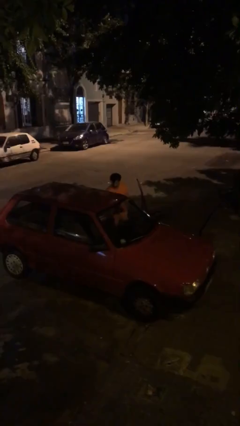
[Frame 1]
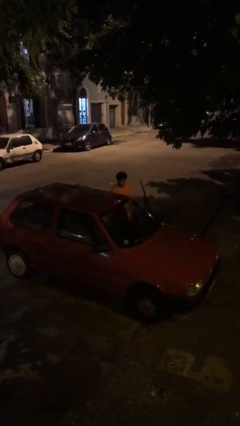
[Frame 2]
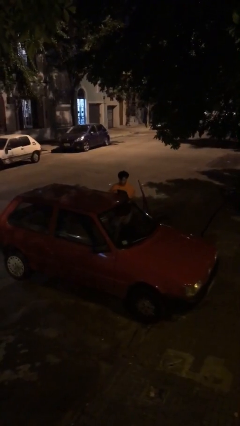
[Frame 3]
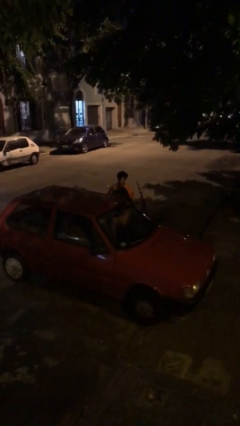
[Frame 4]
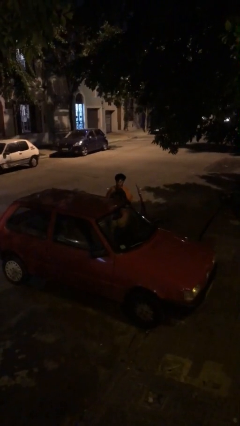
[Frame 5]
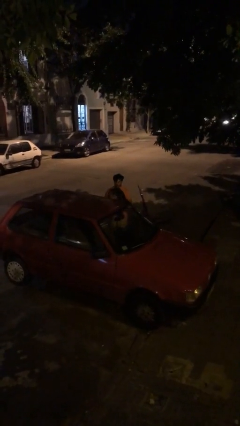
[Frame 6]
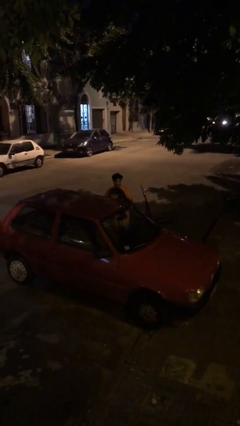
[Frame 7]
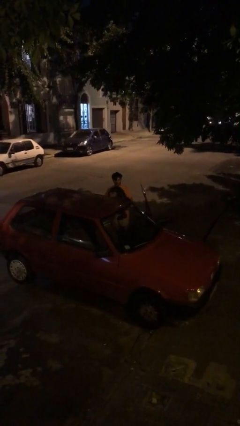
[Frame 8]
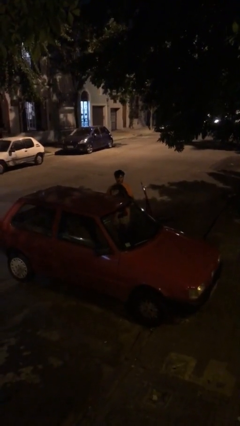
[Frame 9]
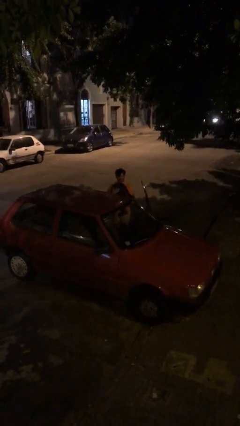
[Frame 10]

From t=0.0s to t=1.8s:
person unloads car

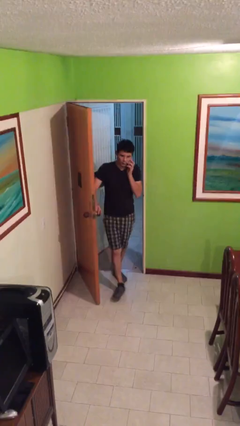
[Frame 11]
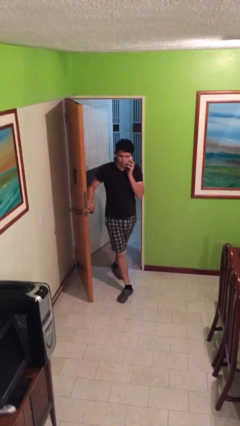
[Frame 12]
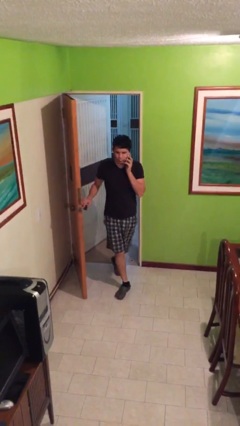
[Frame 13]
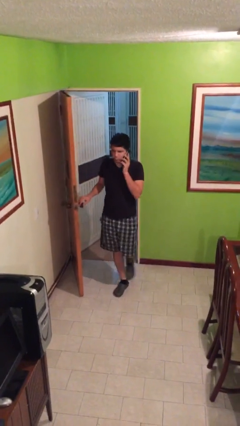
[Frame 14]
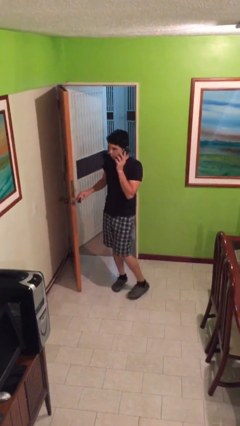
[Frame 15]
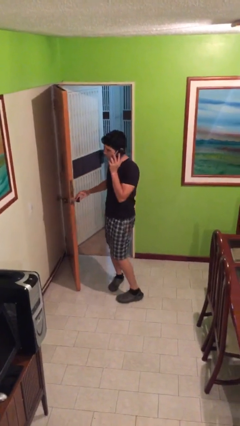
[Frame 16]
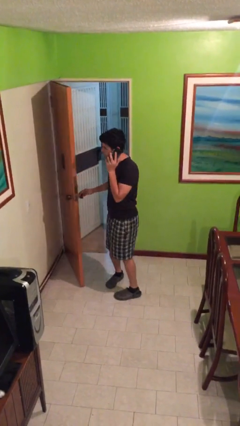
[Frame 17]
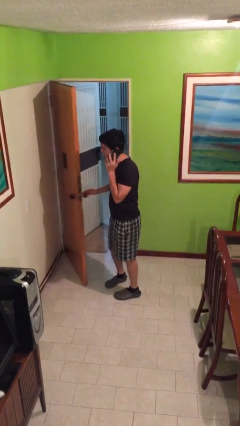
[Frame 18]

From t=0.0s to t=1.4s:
person enters scene through structure

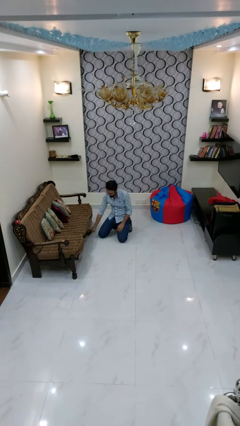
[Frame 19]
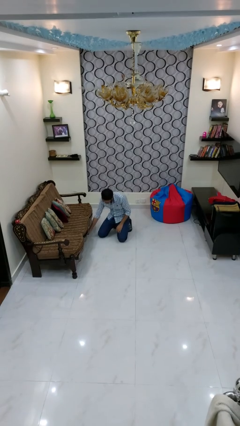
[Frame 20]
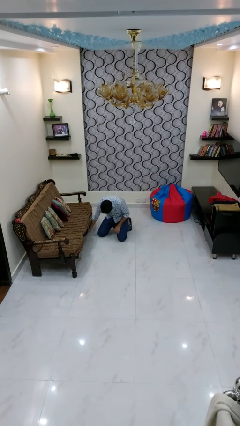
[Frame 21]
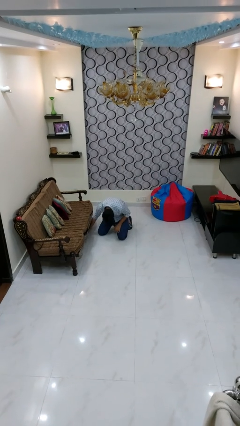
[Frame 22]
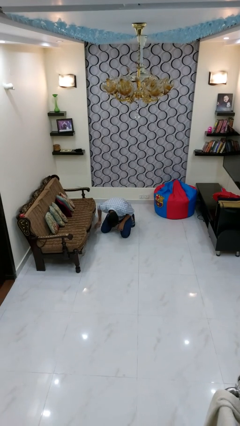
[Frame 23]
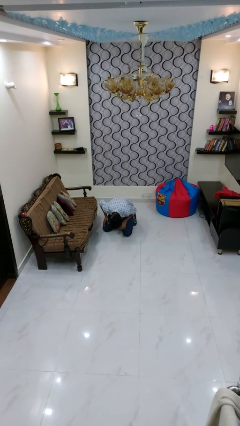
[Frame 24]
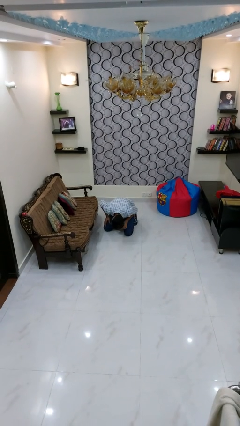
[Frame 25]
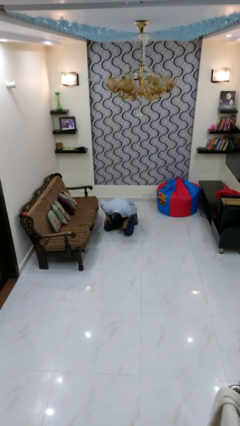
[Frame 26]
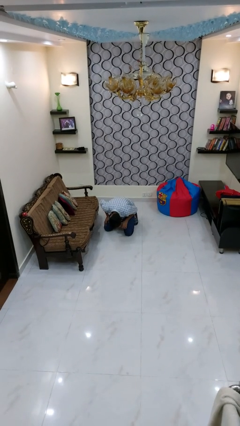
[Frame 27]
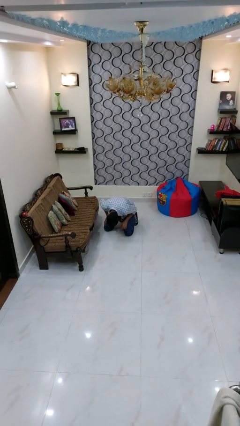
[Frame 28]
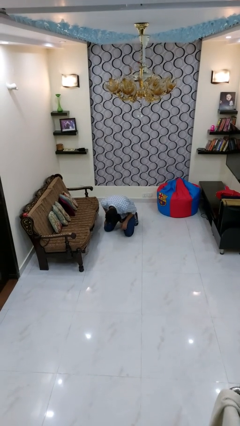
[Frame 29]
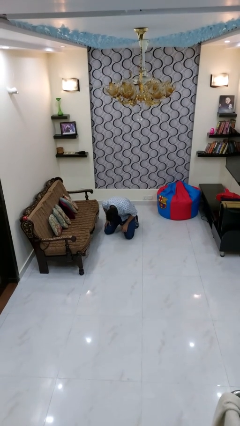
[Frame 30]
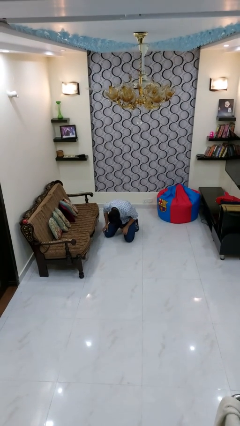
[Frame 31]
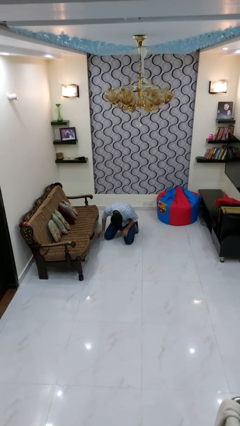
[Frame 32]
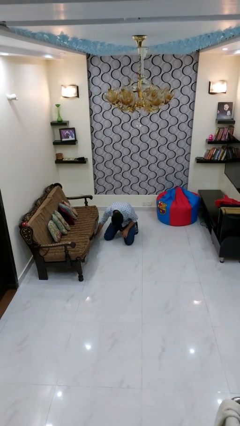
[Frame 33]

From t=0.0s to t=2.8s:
person searches under couch

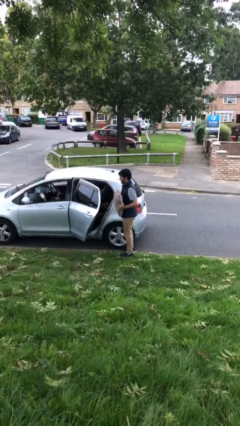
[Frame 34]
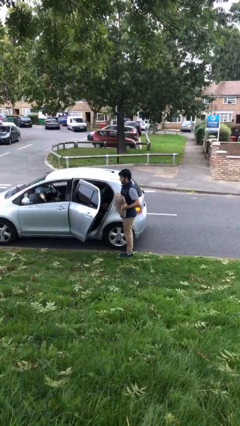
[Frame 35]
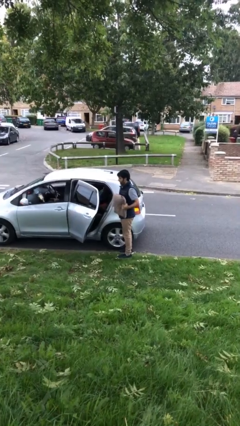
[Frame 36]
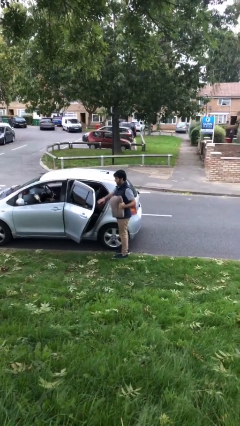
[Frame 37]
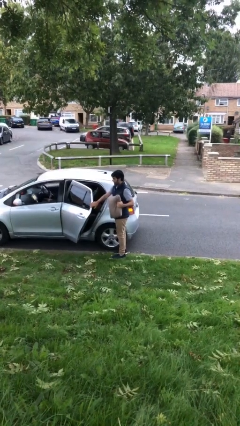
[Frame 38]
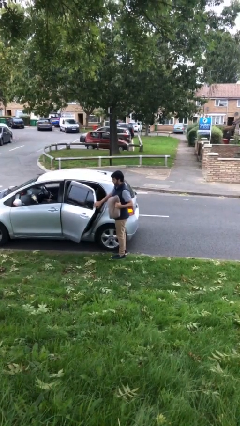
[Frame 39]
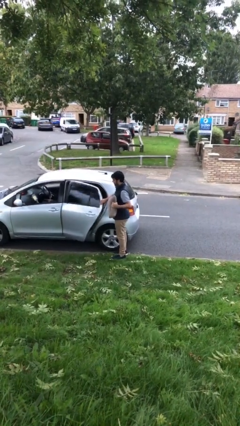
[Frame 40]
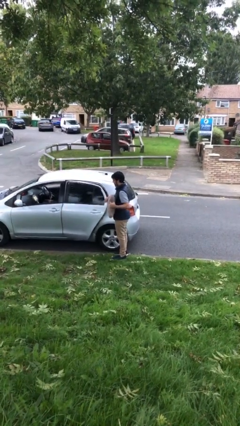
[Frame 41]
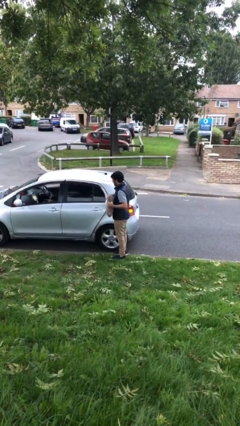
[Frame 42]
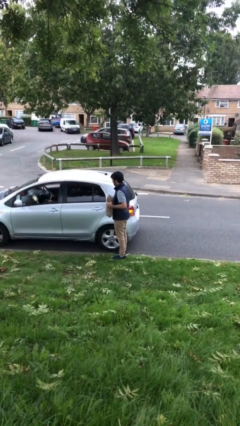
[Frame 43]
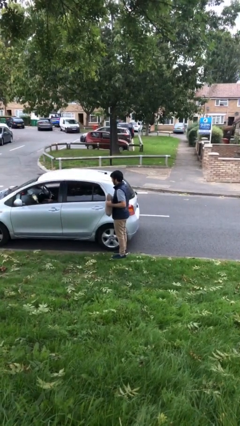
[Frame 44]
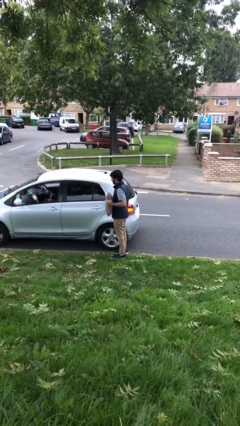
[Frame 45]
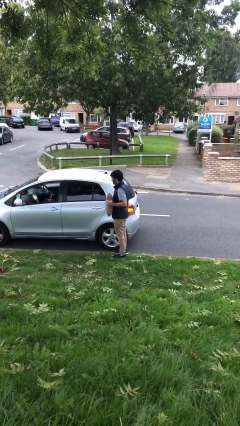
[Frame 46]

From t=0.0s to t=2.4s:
person closes car door

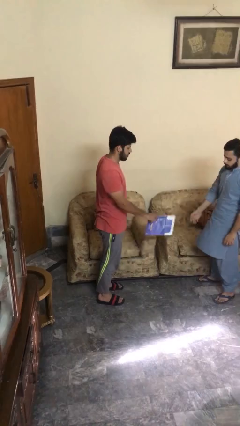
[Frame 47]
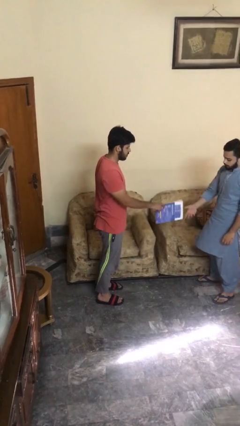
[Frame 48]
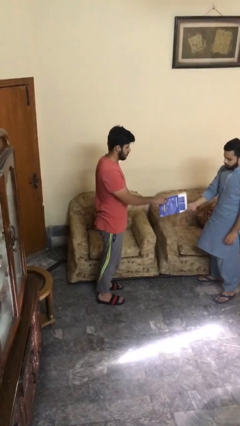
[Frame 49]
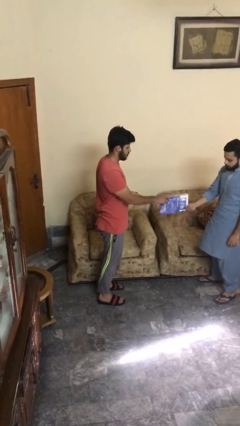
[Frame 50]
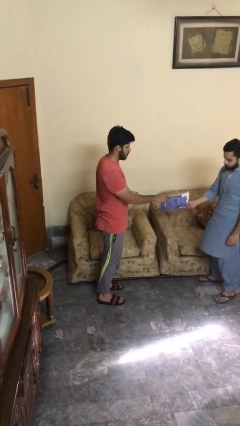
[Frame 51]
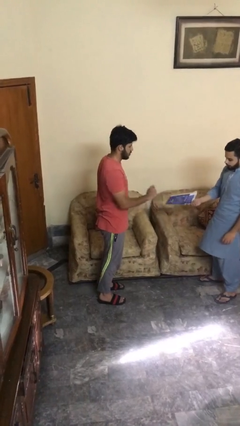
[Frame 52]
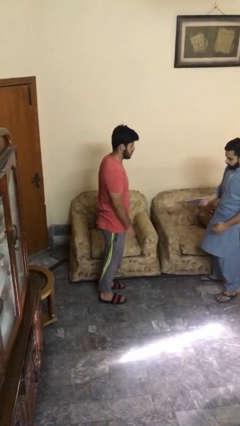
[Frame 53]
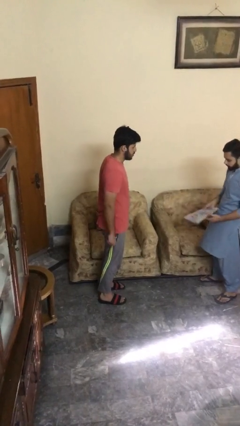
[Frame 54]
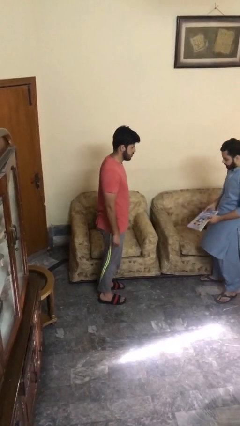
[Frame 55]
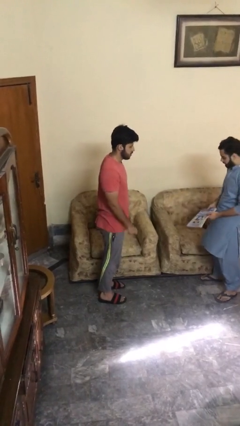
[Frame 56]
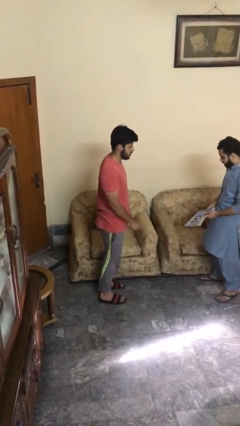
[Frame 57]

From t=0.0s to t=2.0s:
person transfers object to person

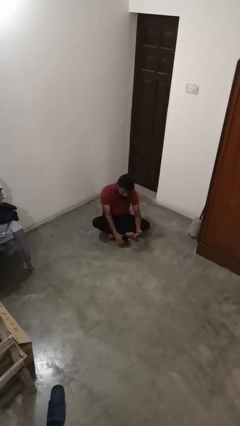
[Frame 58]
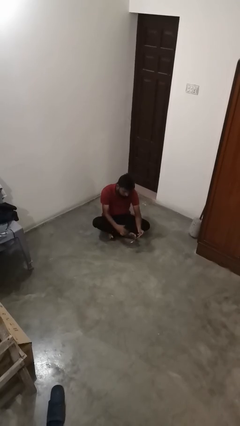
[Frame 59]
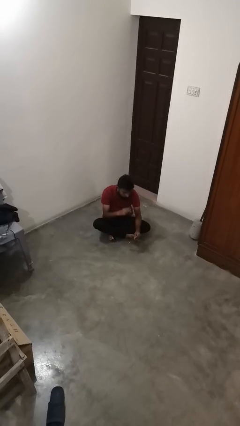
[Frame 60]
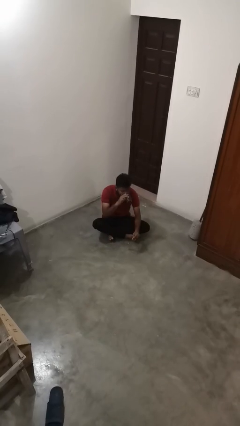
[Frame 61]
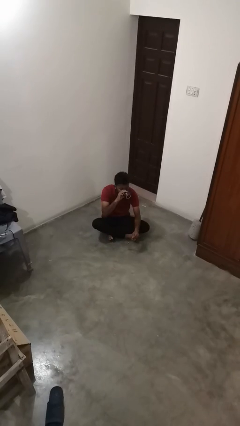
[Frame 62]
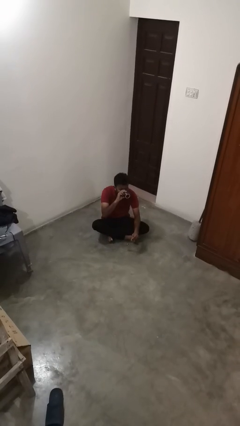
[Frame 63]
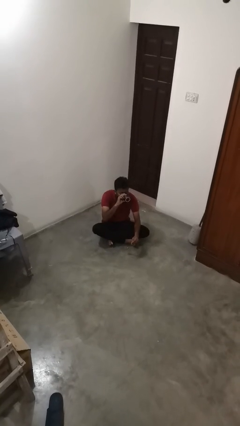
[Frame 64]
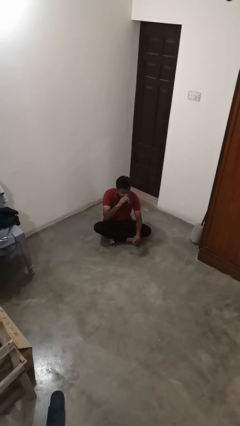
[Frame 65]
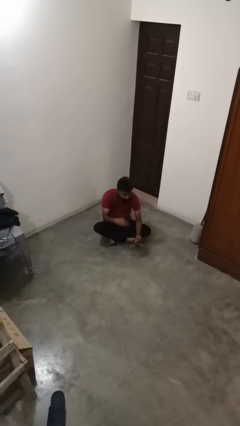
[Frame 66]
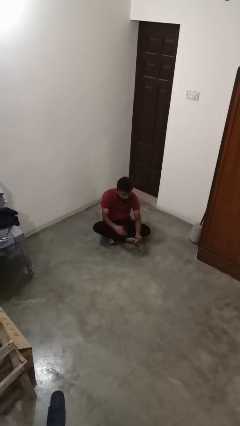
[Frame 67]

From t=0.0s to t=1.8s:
person drinks from mug

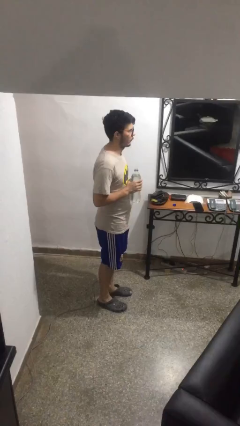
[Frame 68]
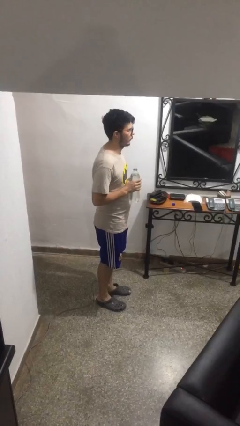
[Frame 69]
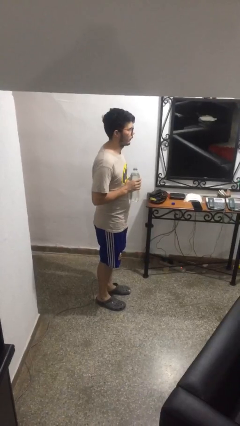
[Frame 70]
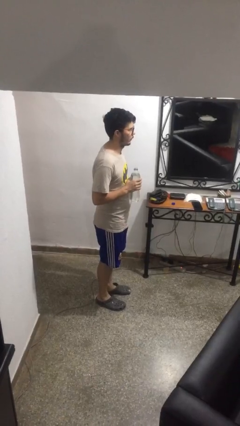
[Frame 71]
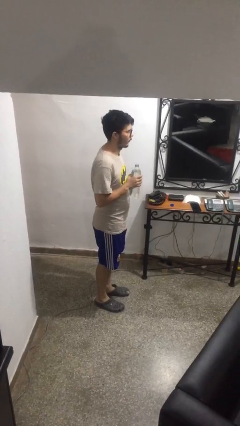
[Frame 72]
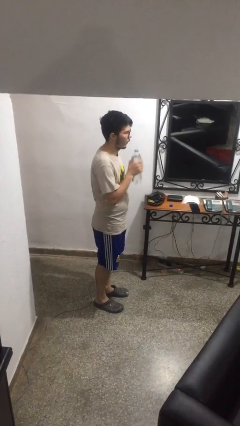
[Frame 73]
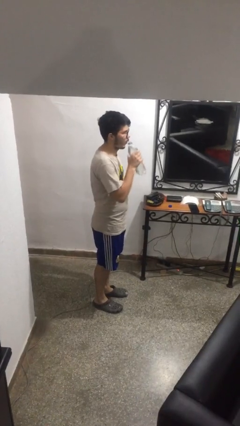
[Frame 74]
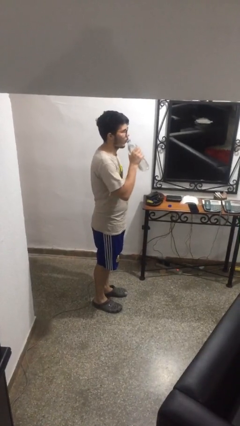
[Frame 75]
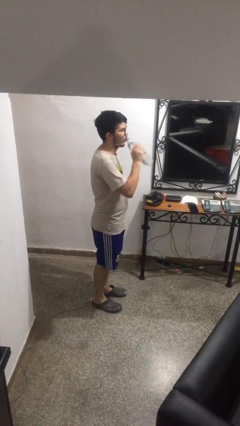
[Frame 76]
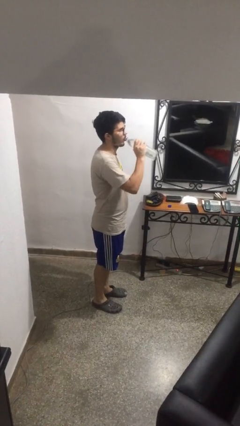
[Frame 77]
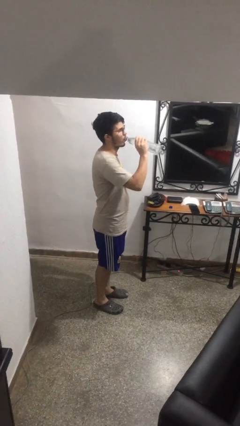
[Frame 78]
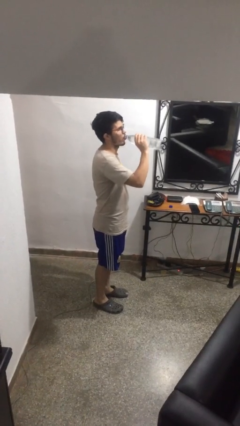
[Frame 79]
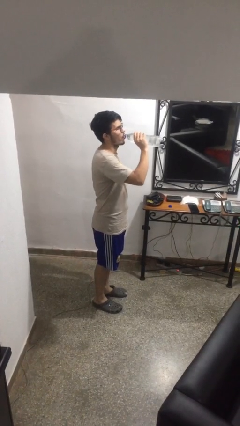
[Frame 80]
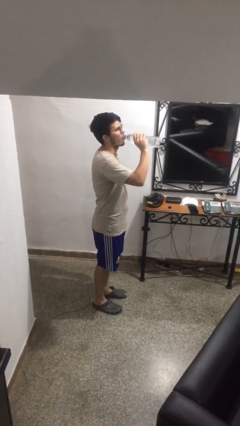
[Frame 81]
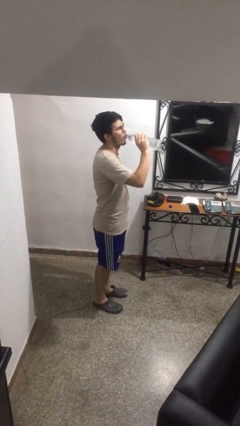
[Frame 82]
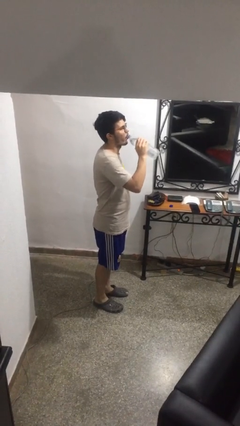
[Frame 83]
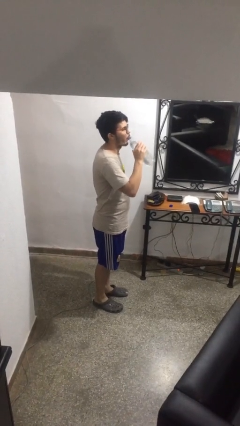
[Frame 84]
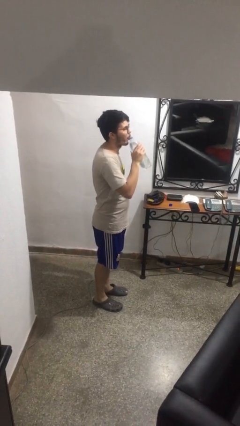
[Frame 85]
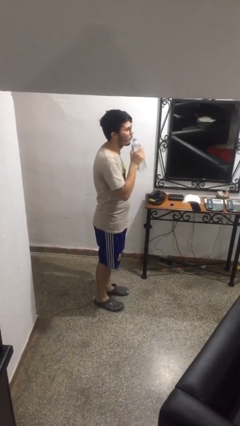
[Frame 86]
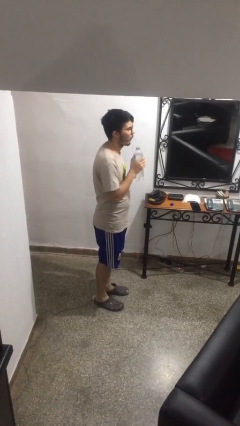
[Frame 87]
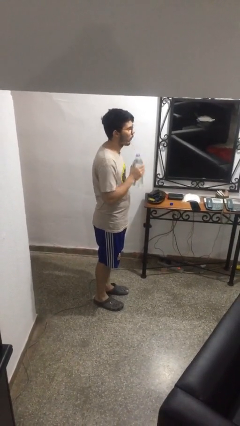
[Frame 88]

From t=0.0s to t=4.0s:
person drinks from bottle

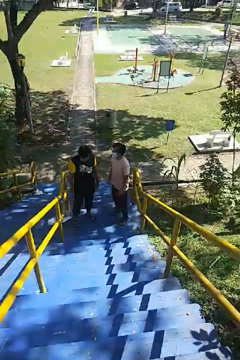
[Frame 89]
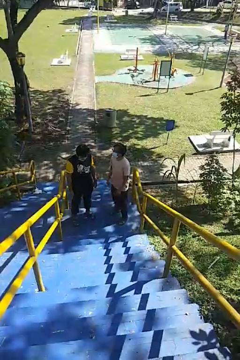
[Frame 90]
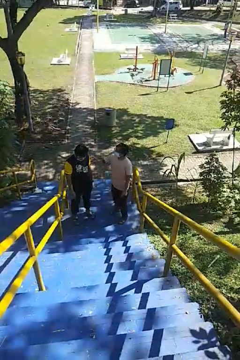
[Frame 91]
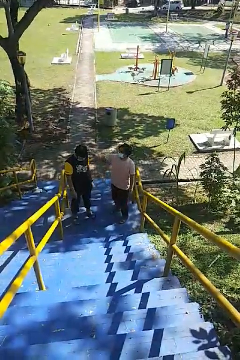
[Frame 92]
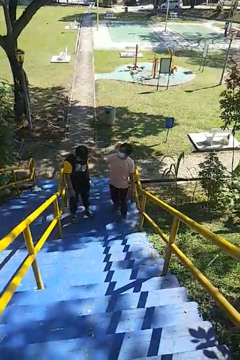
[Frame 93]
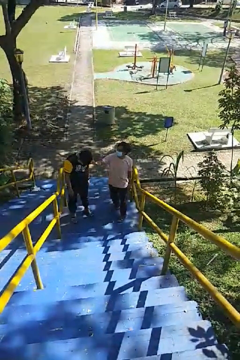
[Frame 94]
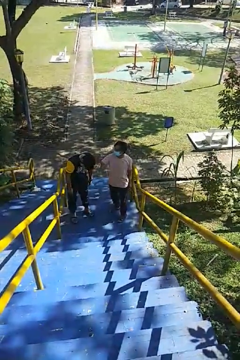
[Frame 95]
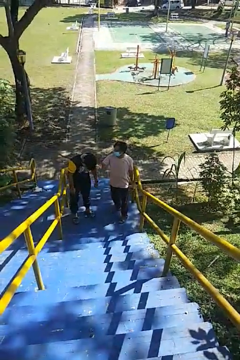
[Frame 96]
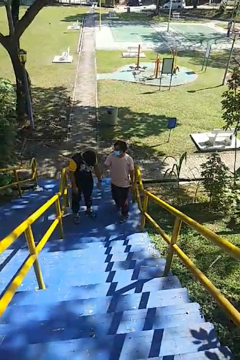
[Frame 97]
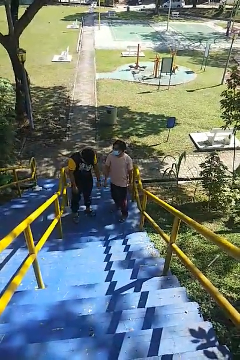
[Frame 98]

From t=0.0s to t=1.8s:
person grabs person by hair
